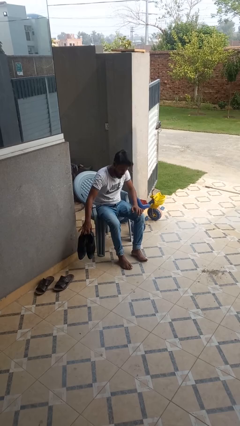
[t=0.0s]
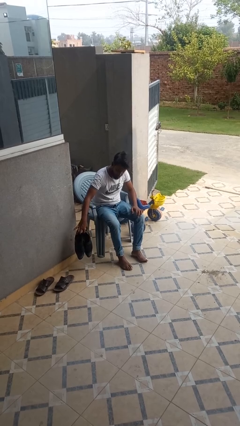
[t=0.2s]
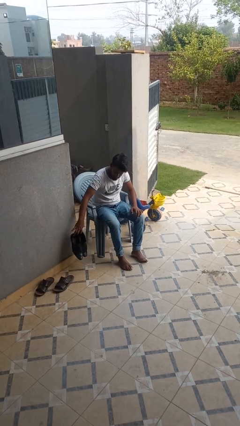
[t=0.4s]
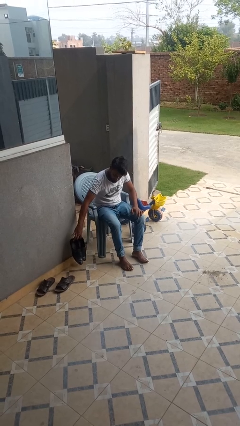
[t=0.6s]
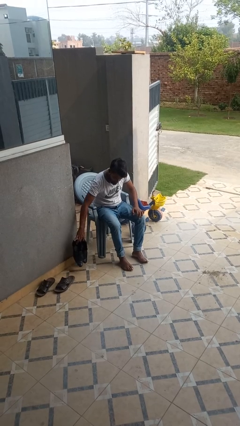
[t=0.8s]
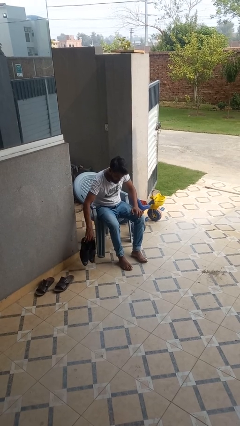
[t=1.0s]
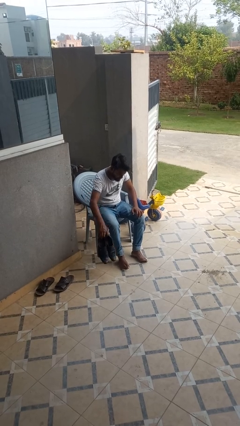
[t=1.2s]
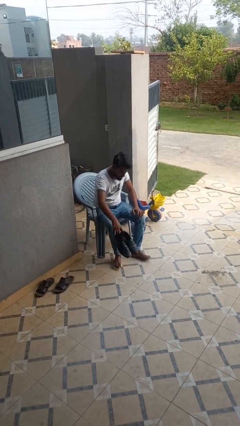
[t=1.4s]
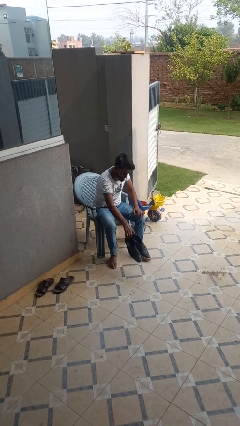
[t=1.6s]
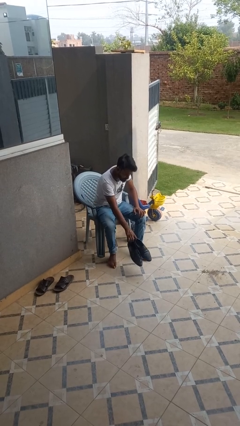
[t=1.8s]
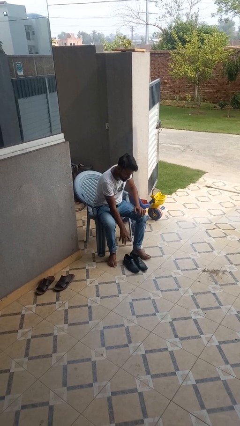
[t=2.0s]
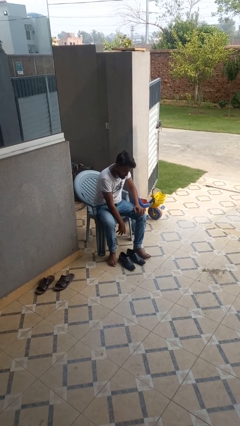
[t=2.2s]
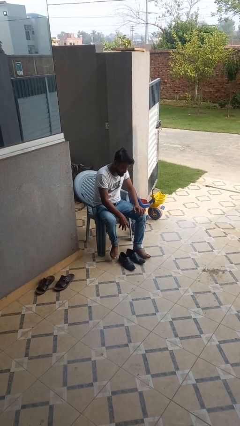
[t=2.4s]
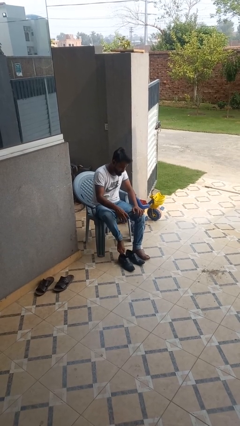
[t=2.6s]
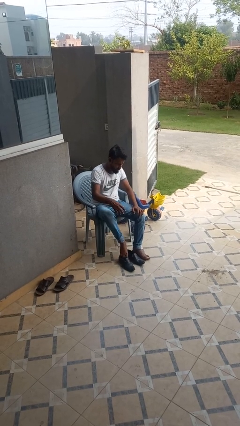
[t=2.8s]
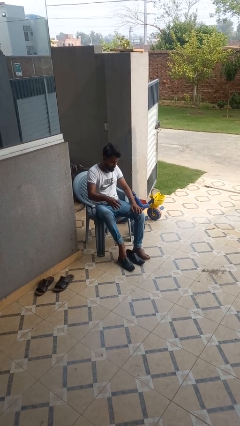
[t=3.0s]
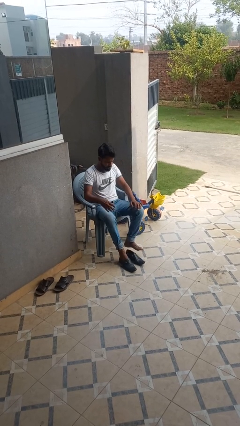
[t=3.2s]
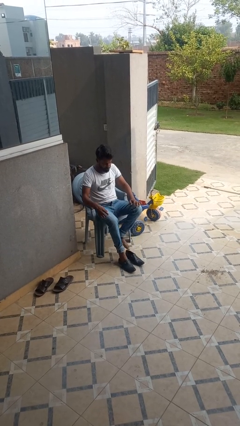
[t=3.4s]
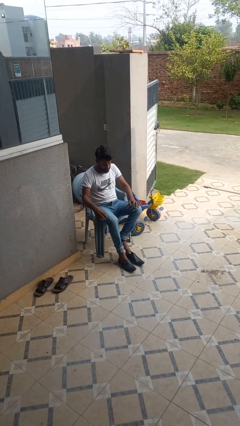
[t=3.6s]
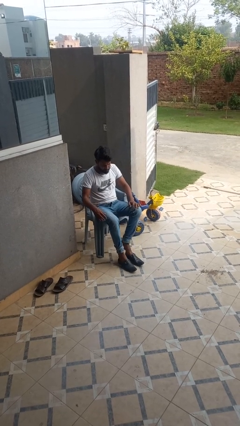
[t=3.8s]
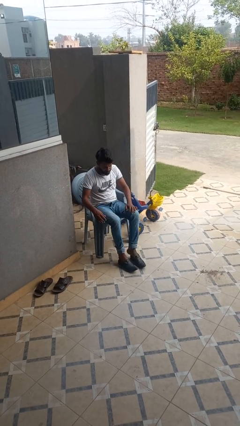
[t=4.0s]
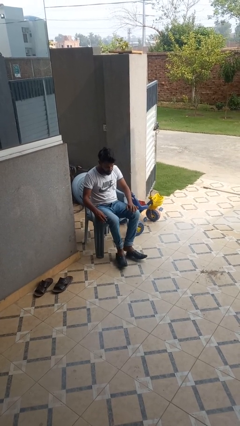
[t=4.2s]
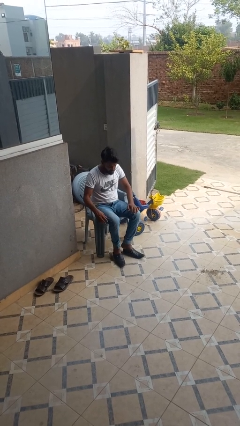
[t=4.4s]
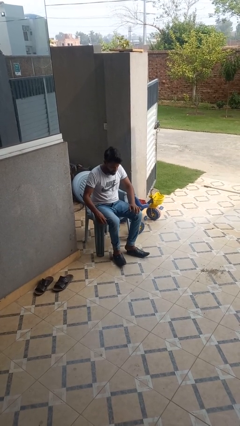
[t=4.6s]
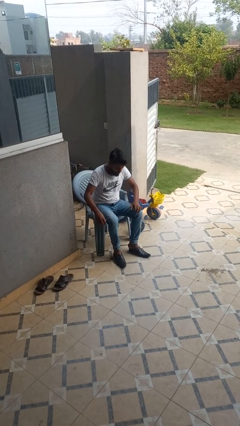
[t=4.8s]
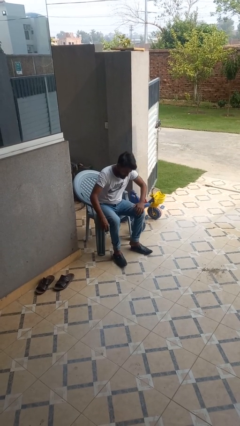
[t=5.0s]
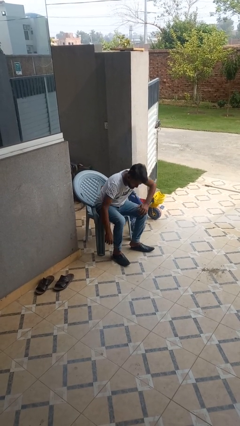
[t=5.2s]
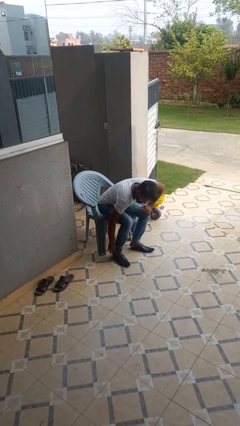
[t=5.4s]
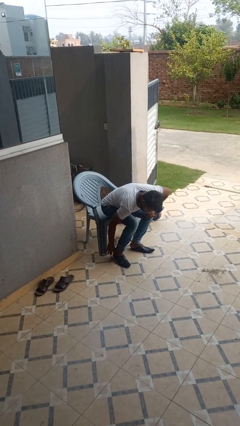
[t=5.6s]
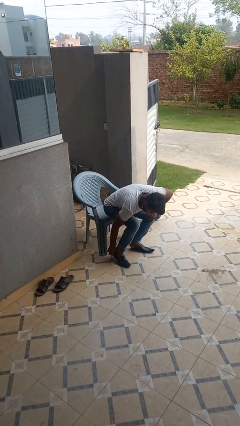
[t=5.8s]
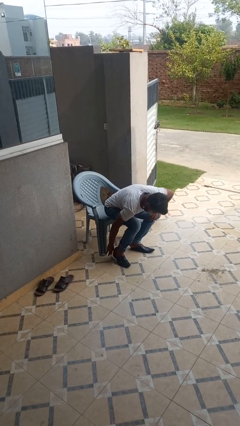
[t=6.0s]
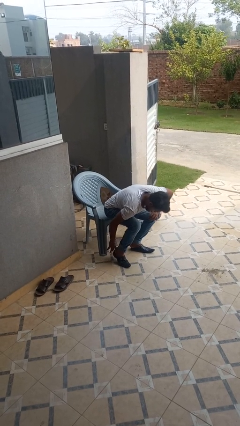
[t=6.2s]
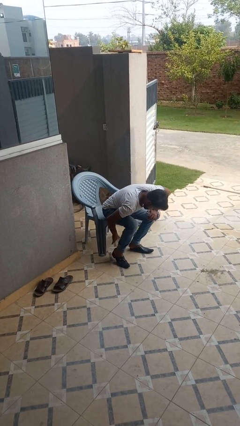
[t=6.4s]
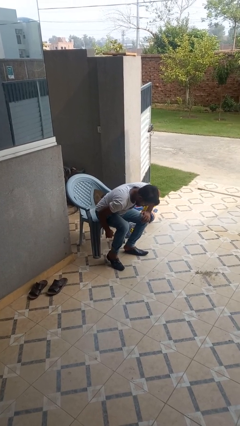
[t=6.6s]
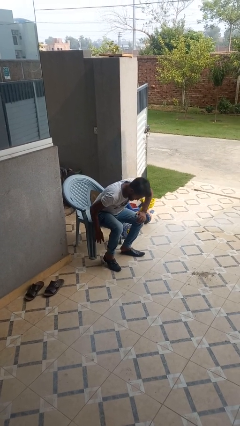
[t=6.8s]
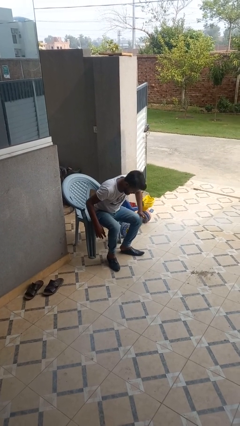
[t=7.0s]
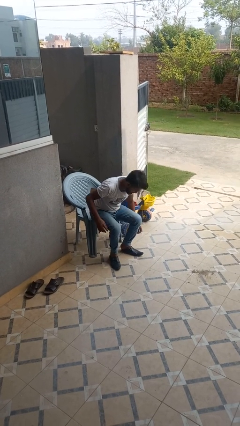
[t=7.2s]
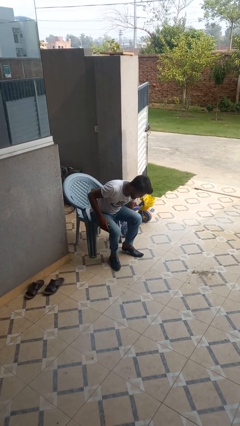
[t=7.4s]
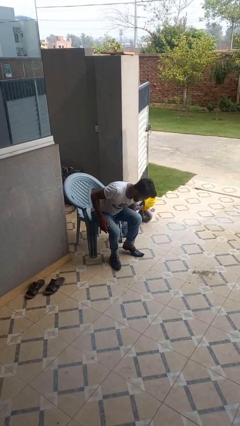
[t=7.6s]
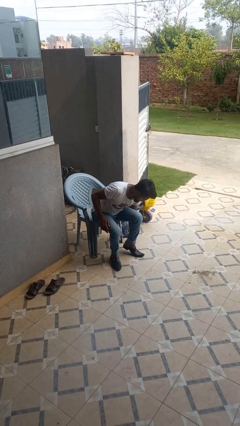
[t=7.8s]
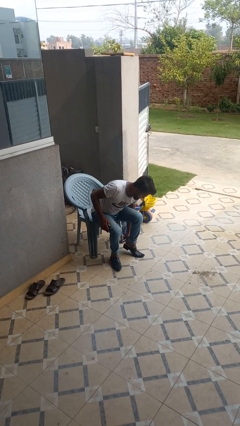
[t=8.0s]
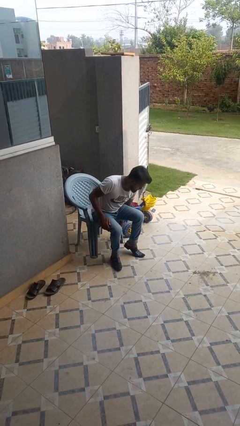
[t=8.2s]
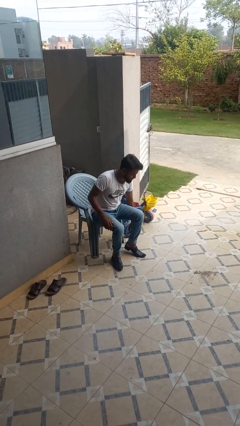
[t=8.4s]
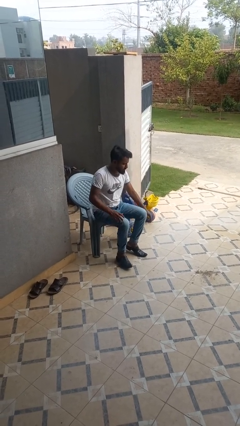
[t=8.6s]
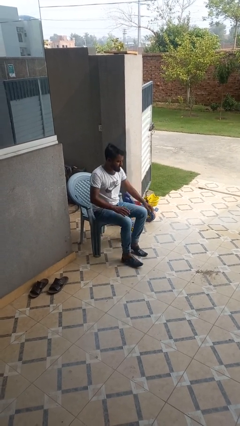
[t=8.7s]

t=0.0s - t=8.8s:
person puts on shoes

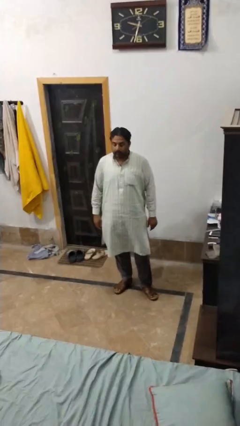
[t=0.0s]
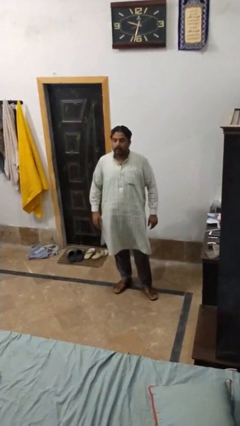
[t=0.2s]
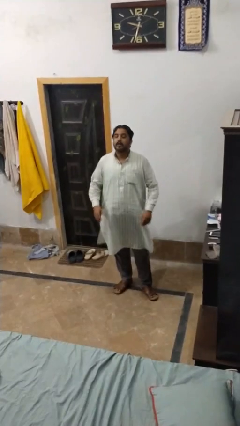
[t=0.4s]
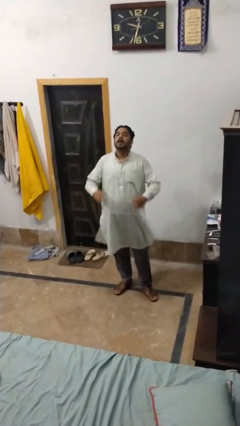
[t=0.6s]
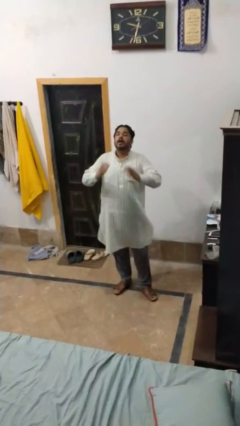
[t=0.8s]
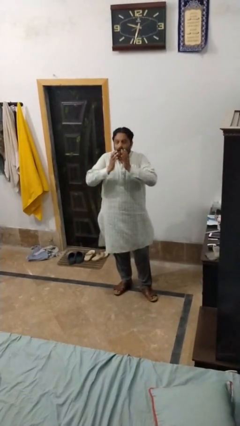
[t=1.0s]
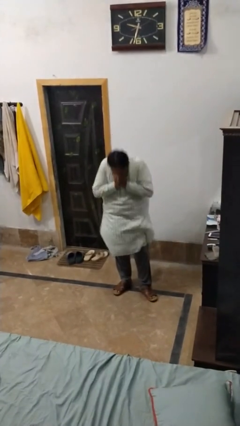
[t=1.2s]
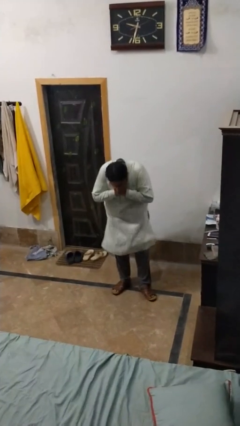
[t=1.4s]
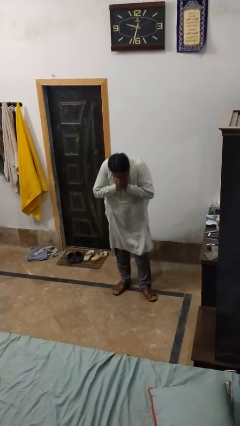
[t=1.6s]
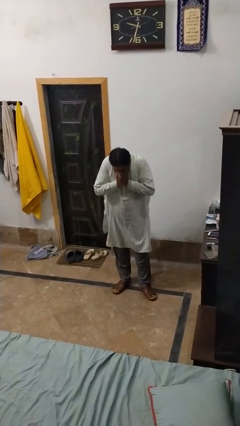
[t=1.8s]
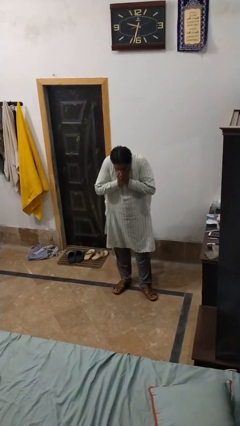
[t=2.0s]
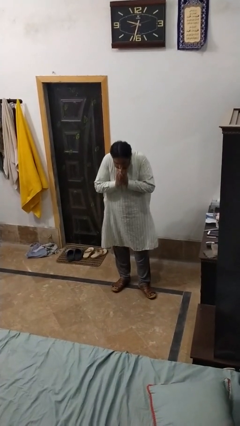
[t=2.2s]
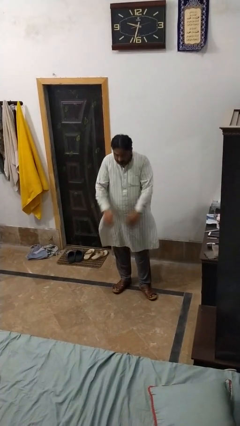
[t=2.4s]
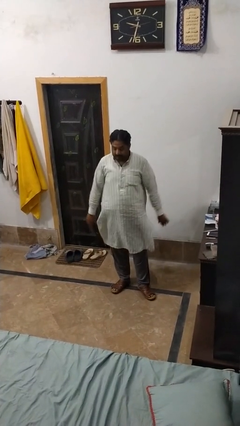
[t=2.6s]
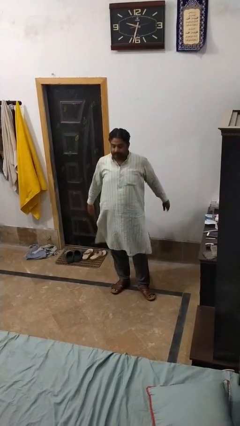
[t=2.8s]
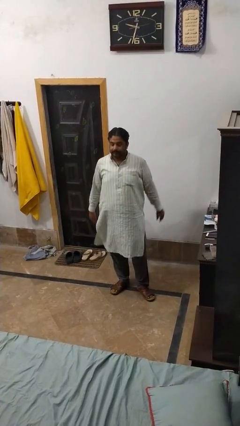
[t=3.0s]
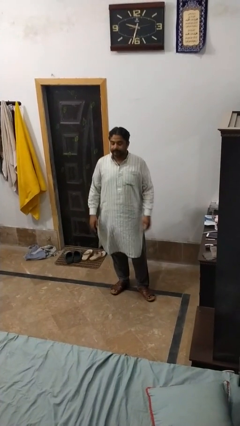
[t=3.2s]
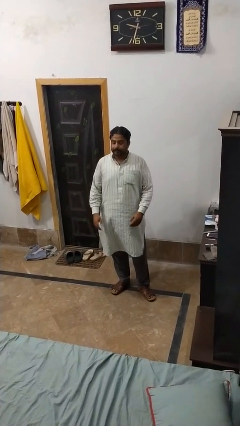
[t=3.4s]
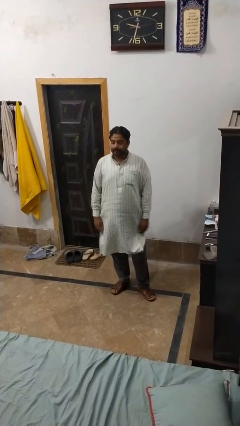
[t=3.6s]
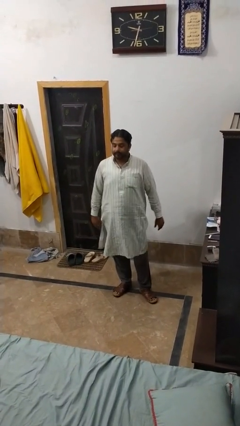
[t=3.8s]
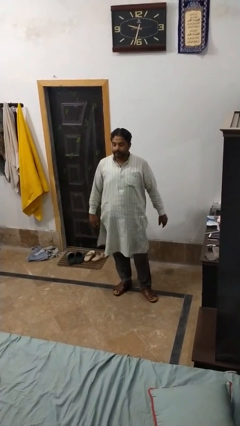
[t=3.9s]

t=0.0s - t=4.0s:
person sneezes into hand

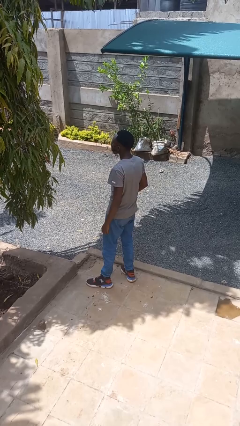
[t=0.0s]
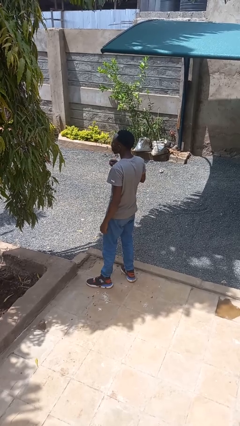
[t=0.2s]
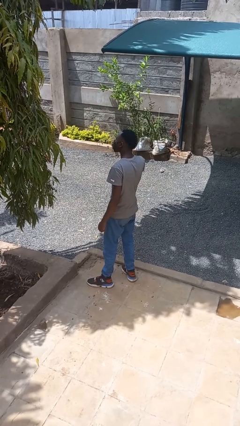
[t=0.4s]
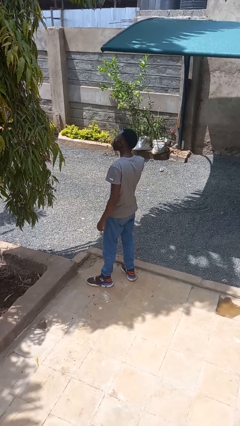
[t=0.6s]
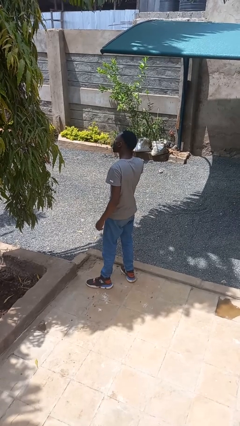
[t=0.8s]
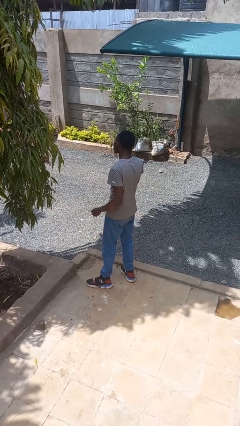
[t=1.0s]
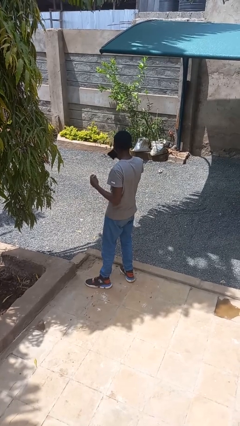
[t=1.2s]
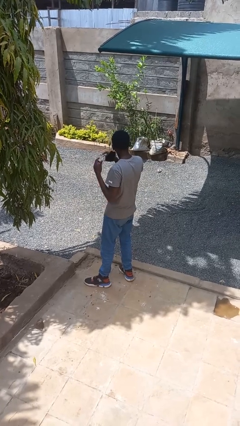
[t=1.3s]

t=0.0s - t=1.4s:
person takes off facemask

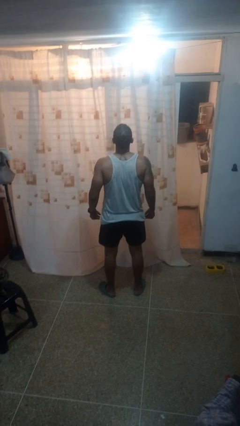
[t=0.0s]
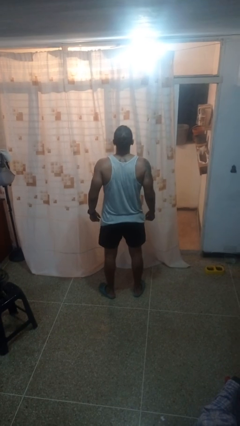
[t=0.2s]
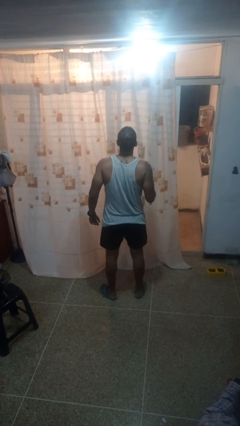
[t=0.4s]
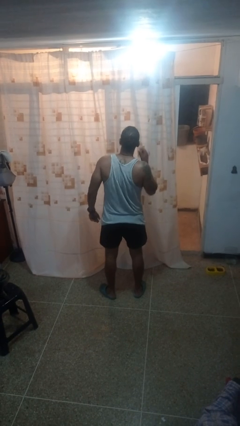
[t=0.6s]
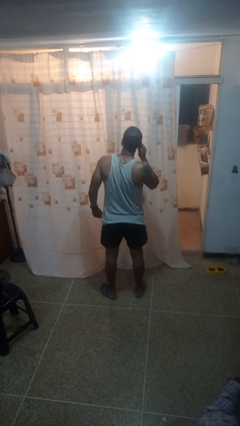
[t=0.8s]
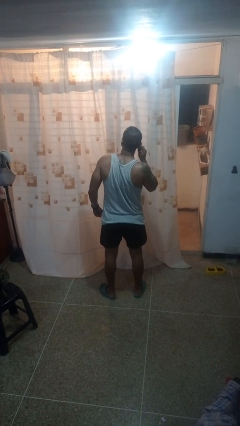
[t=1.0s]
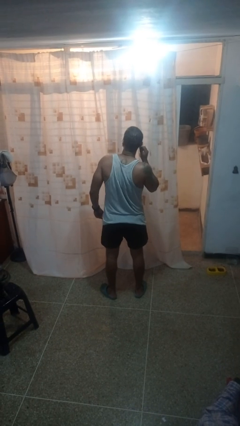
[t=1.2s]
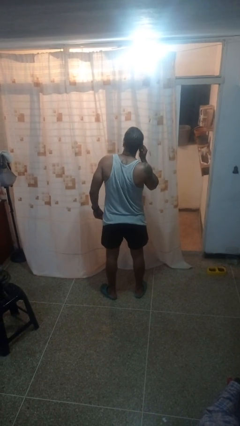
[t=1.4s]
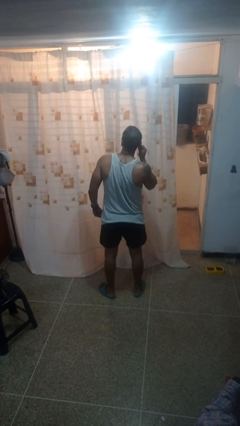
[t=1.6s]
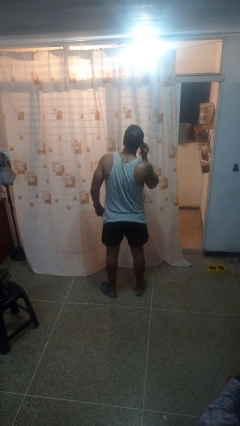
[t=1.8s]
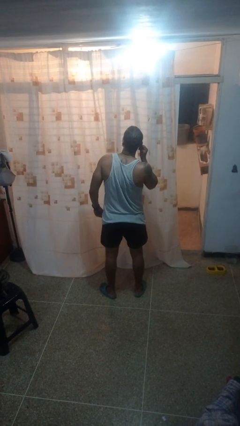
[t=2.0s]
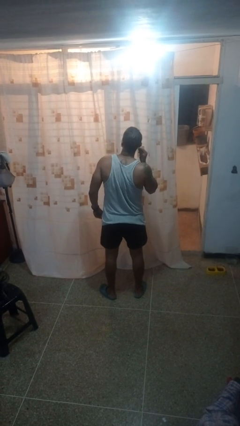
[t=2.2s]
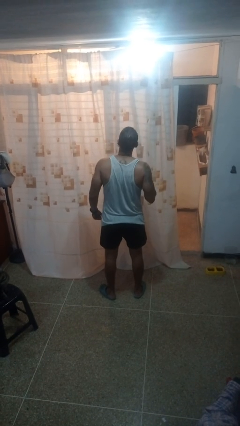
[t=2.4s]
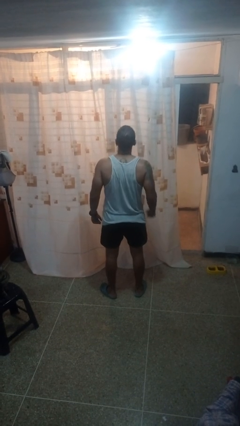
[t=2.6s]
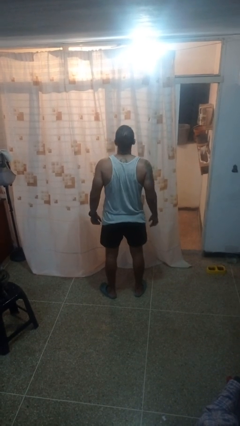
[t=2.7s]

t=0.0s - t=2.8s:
person touches earlobe

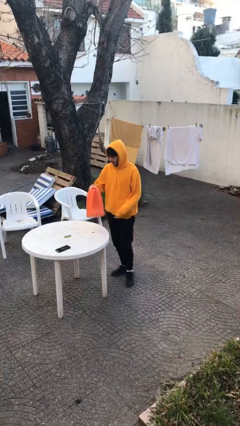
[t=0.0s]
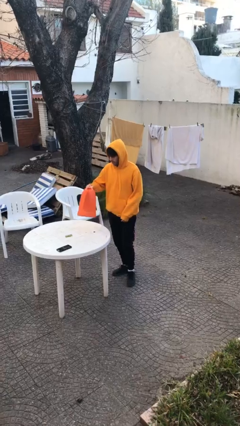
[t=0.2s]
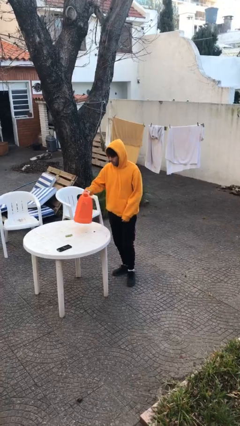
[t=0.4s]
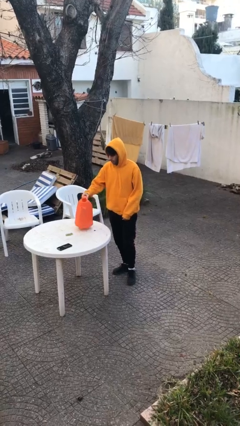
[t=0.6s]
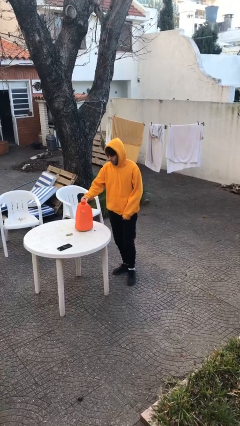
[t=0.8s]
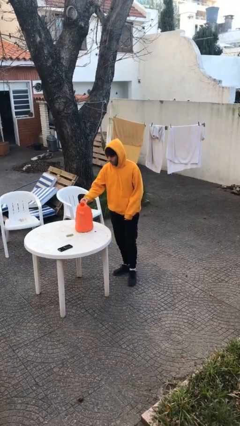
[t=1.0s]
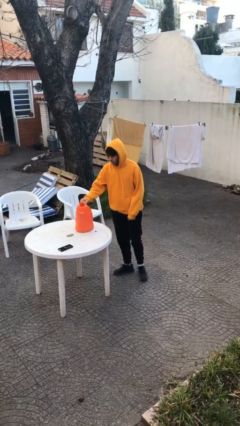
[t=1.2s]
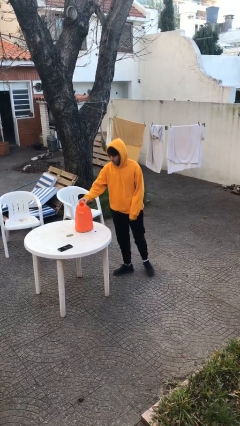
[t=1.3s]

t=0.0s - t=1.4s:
person puts down object on table
